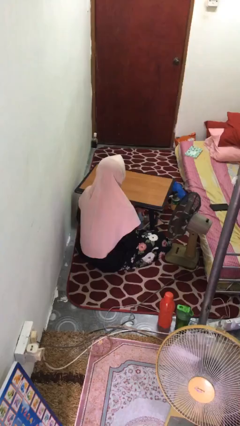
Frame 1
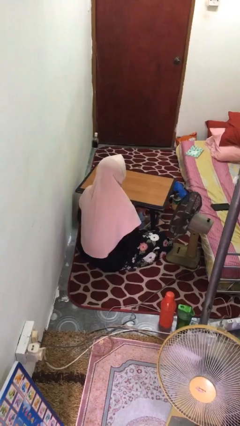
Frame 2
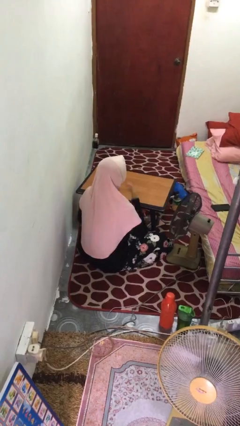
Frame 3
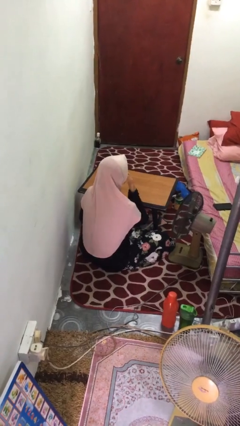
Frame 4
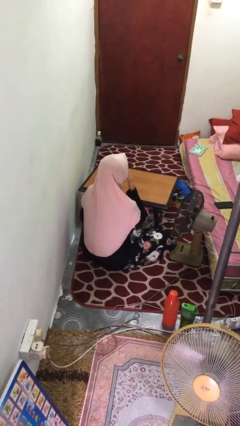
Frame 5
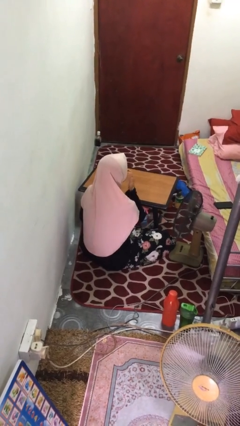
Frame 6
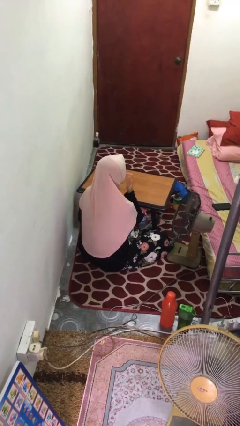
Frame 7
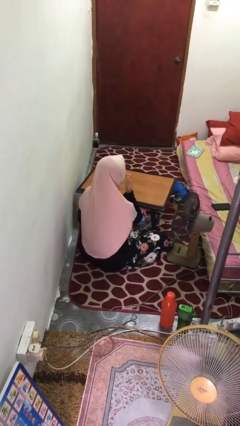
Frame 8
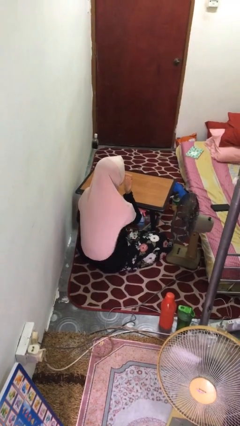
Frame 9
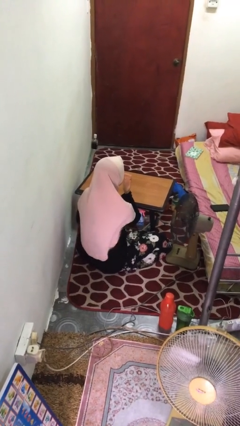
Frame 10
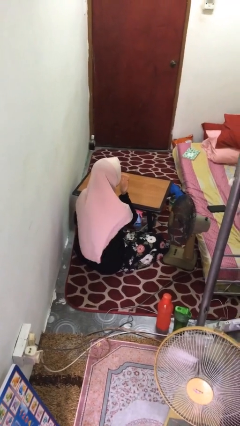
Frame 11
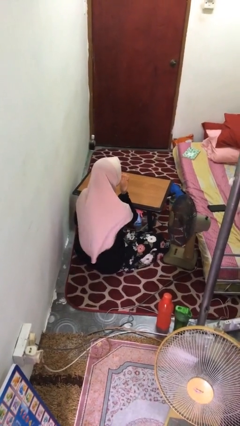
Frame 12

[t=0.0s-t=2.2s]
person licks fingers

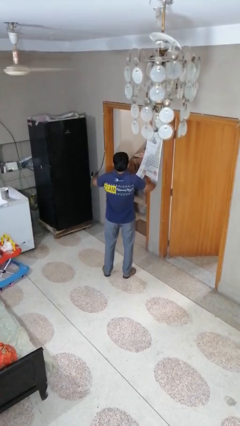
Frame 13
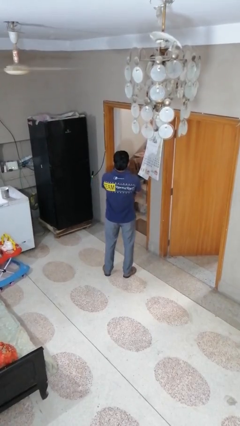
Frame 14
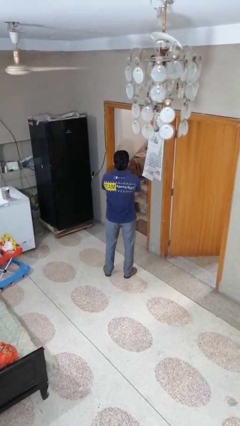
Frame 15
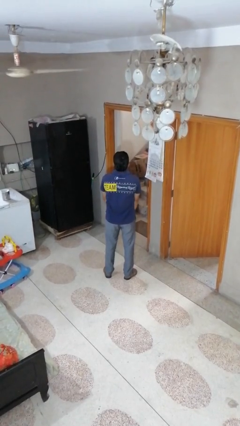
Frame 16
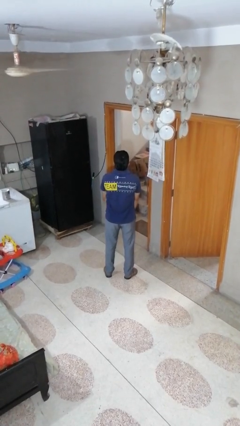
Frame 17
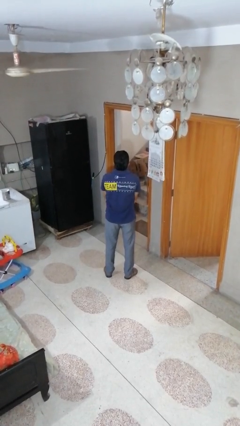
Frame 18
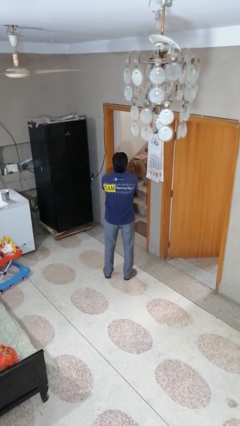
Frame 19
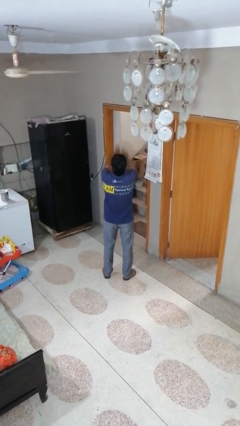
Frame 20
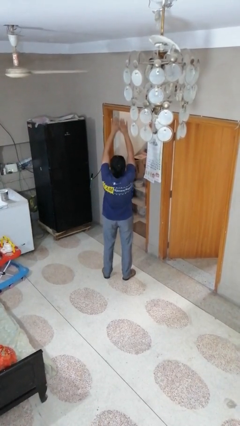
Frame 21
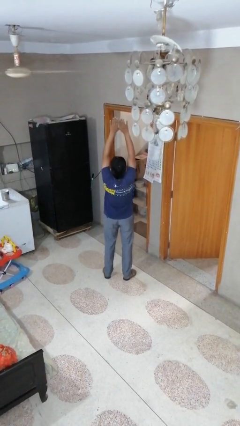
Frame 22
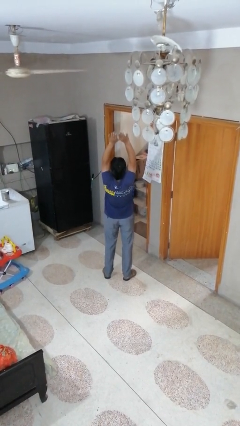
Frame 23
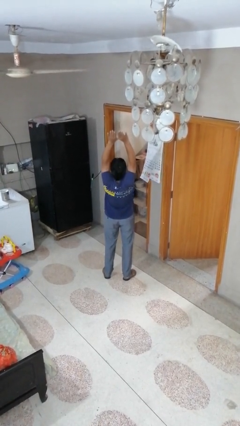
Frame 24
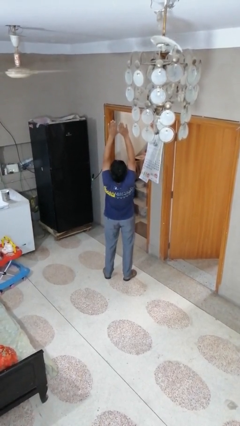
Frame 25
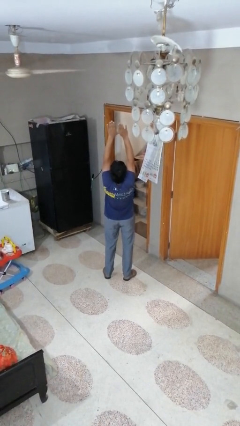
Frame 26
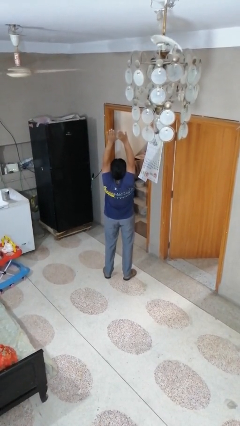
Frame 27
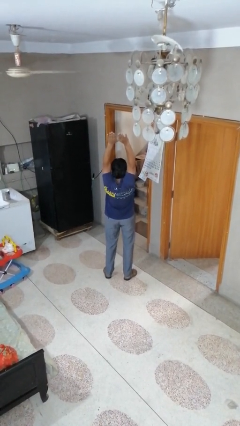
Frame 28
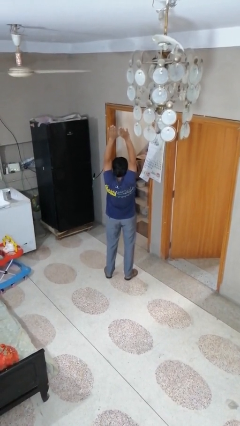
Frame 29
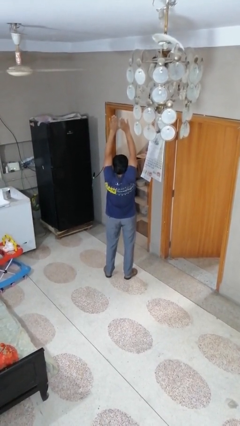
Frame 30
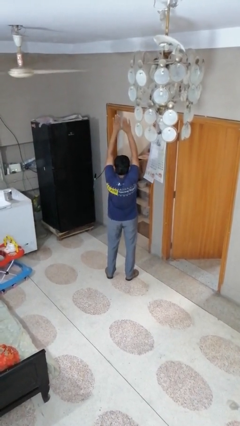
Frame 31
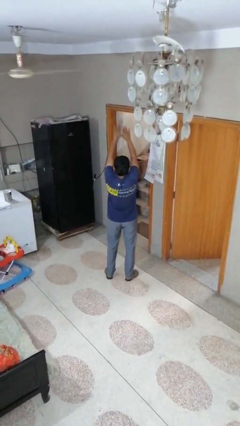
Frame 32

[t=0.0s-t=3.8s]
person stretches arms over head

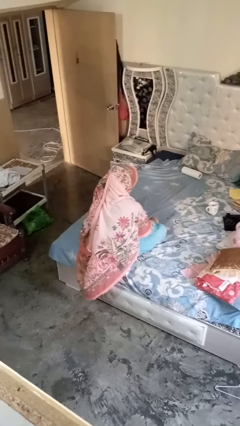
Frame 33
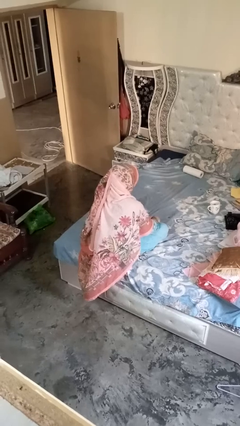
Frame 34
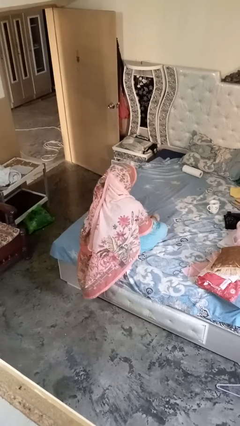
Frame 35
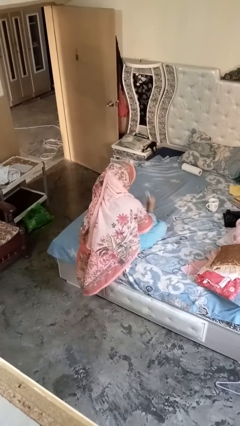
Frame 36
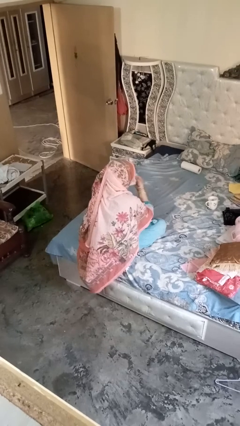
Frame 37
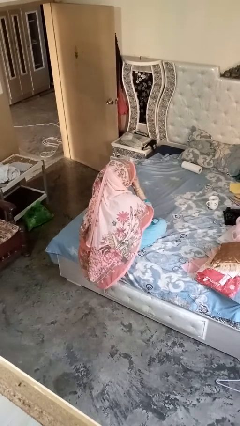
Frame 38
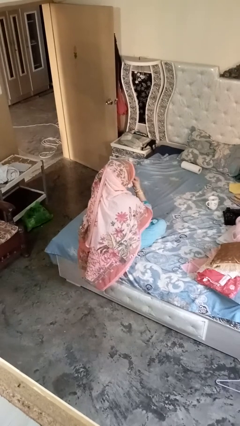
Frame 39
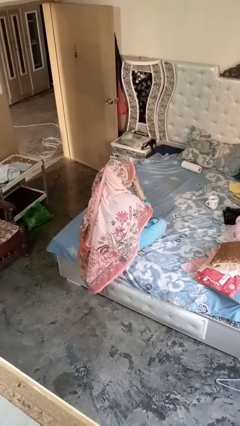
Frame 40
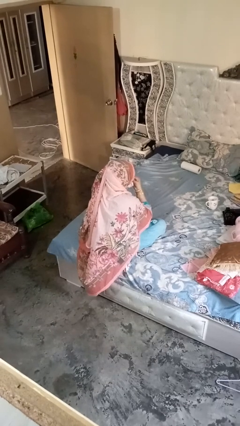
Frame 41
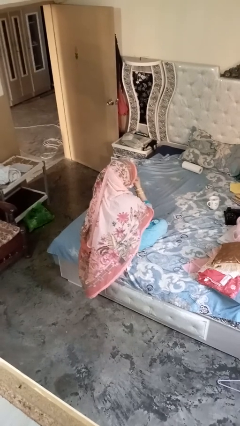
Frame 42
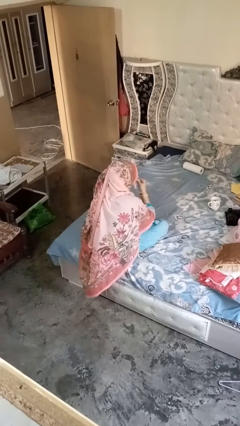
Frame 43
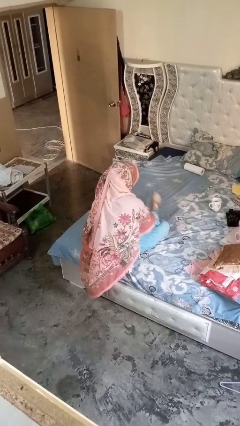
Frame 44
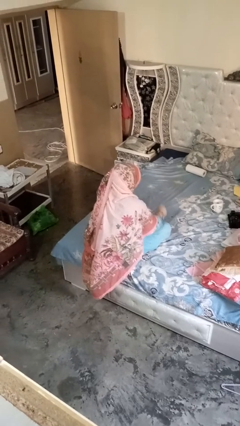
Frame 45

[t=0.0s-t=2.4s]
person blows nose

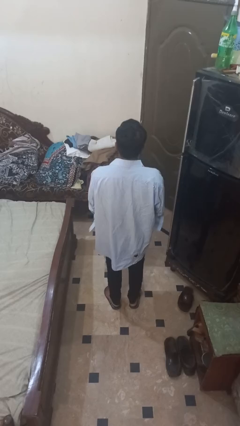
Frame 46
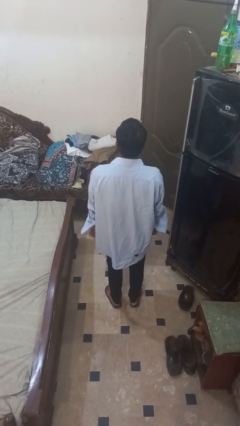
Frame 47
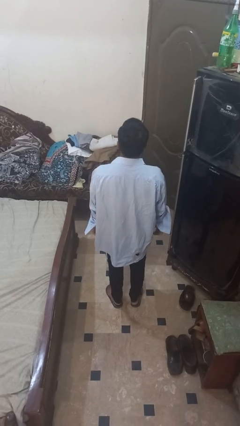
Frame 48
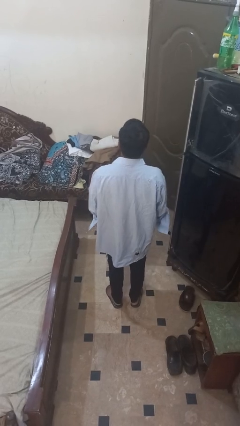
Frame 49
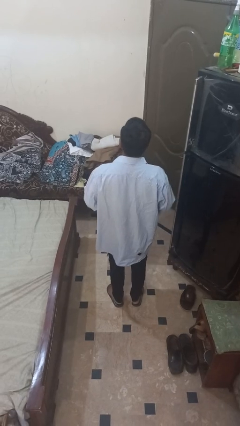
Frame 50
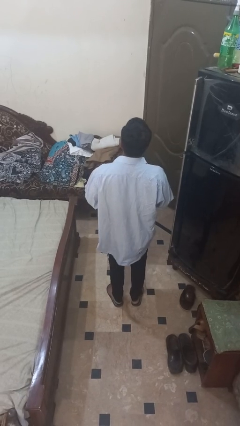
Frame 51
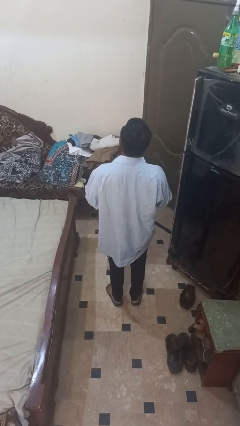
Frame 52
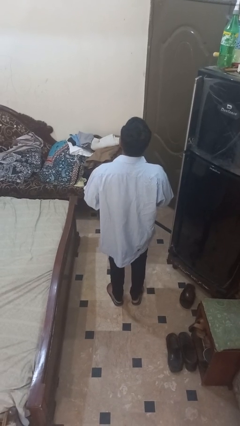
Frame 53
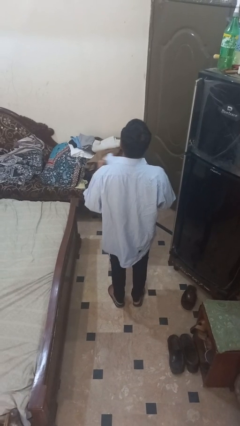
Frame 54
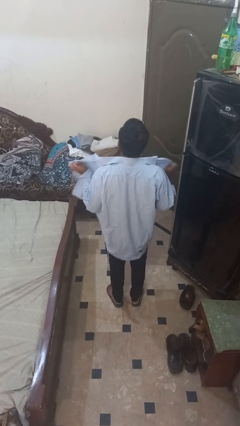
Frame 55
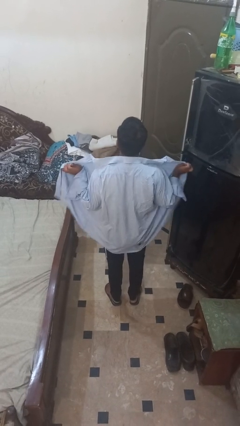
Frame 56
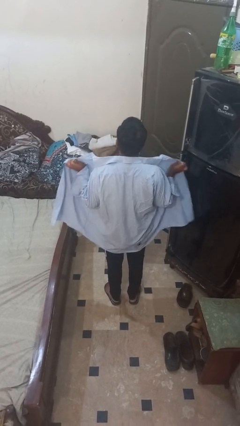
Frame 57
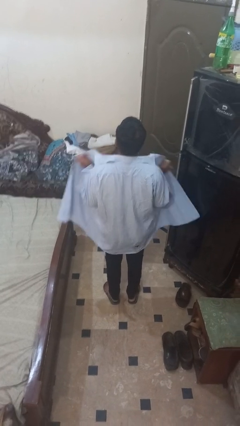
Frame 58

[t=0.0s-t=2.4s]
person unbuttons shirt

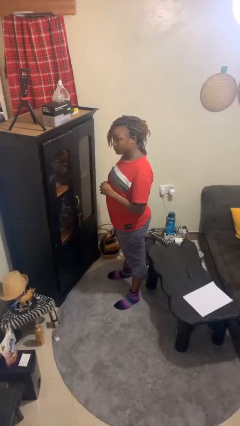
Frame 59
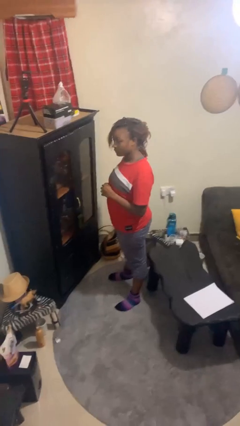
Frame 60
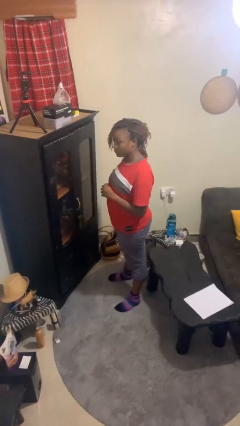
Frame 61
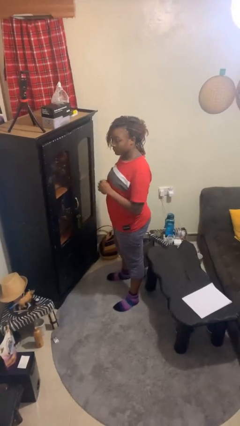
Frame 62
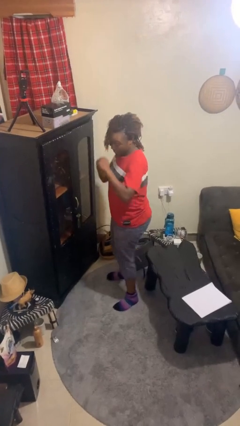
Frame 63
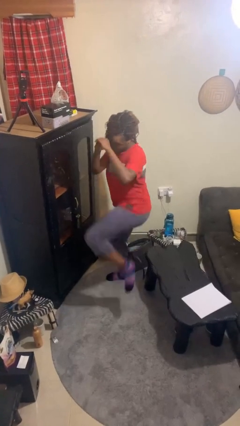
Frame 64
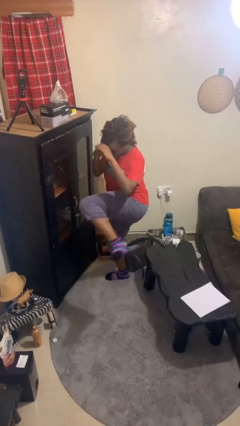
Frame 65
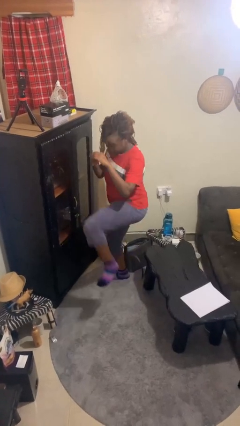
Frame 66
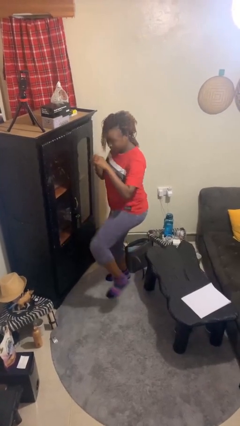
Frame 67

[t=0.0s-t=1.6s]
person karate kicks

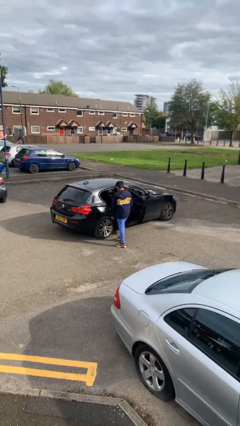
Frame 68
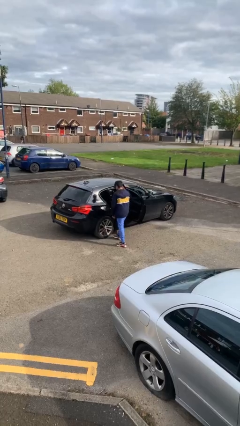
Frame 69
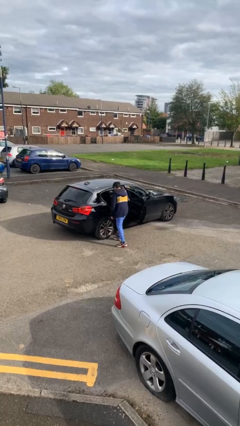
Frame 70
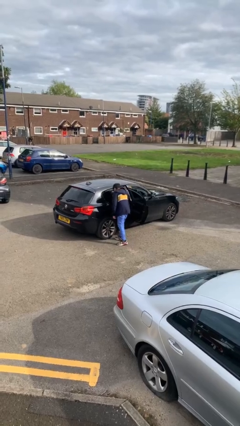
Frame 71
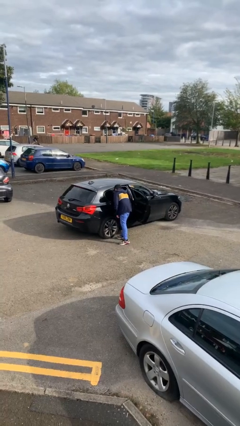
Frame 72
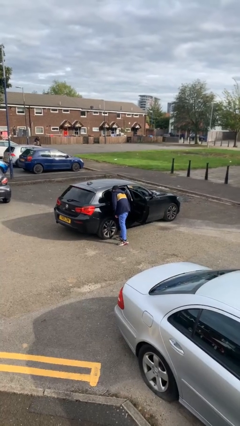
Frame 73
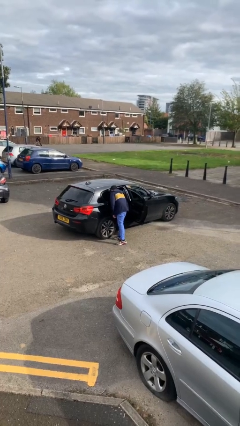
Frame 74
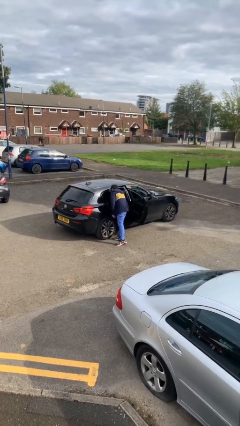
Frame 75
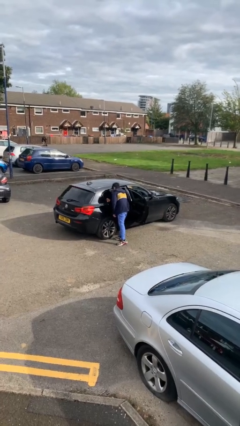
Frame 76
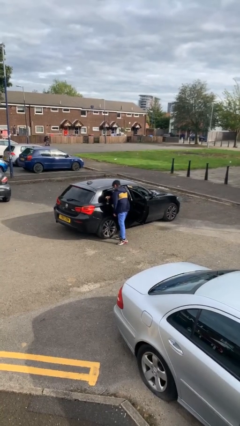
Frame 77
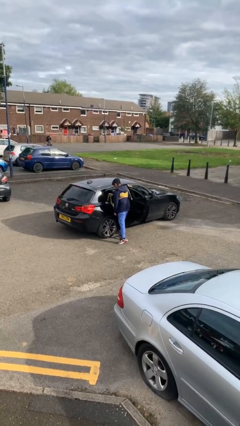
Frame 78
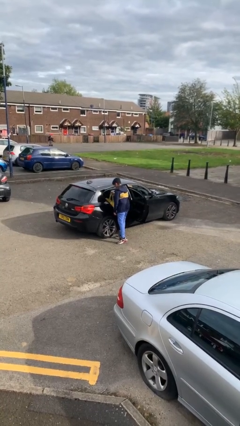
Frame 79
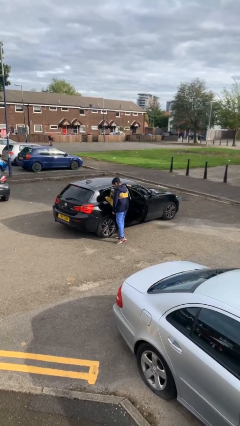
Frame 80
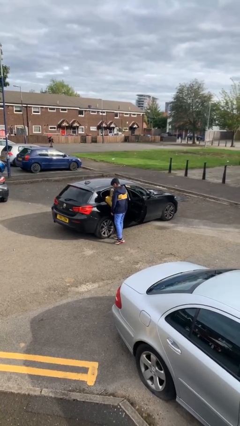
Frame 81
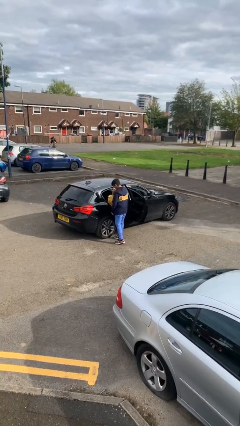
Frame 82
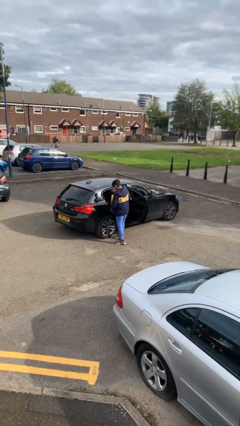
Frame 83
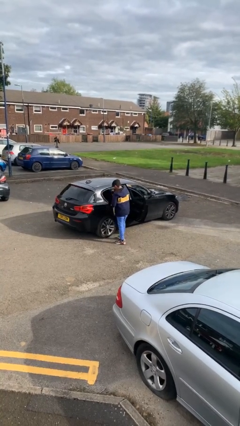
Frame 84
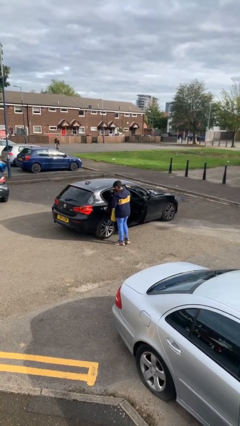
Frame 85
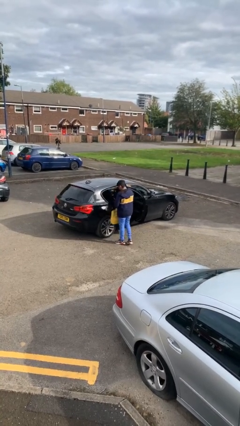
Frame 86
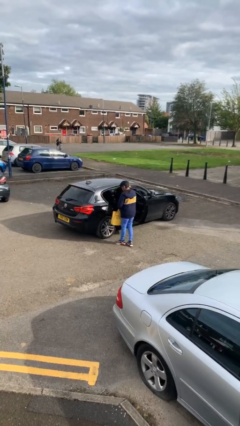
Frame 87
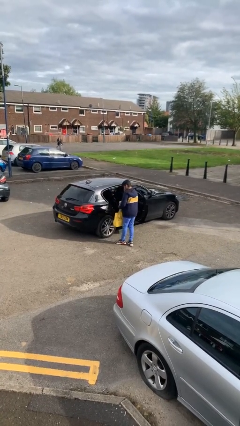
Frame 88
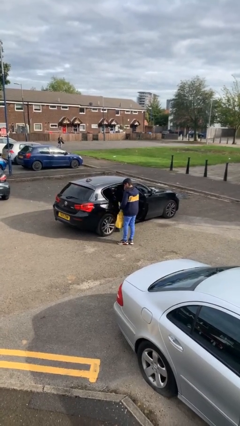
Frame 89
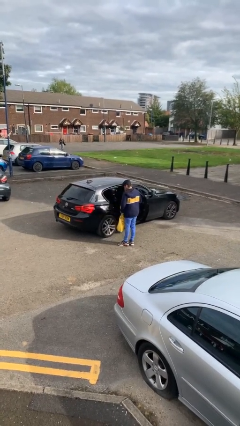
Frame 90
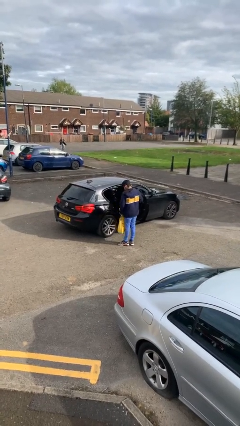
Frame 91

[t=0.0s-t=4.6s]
person unloads car
